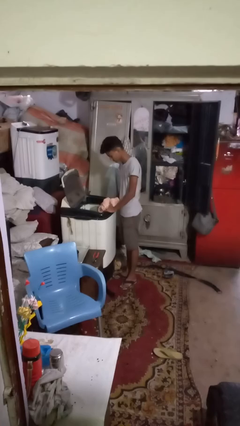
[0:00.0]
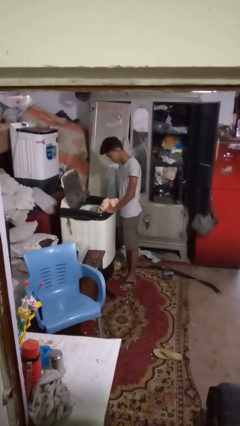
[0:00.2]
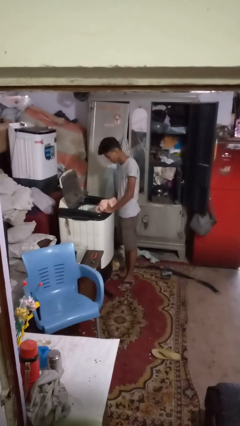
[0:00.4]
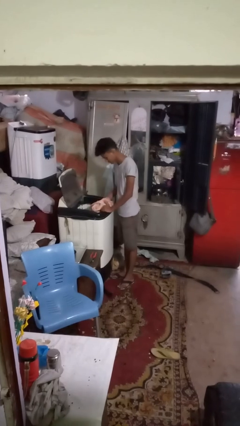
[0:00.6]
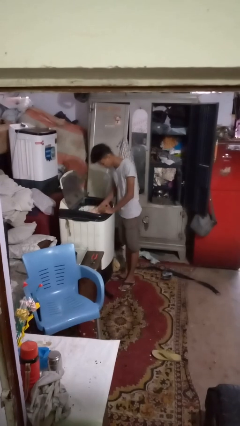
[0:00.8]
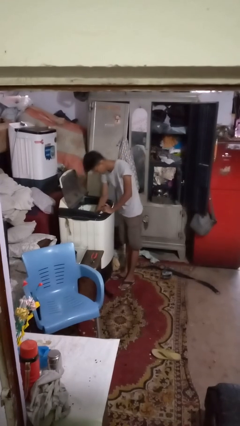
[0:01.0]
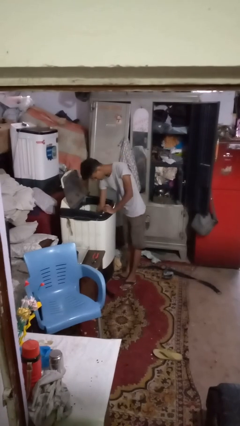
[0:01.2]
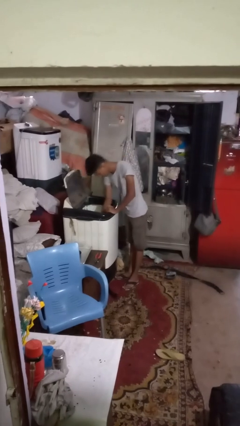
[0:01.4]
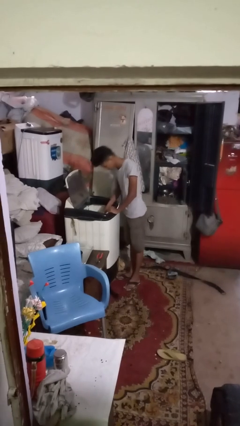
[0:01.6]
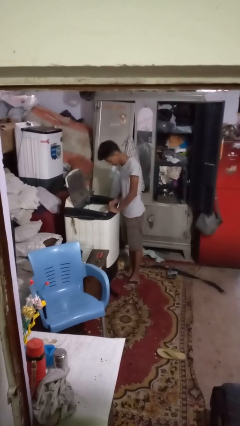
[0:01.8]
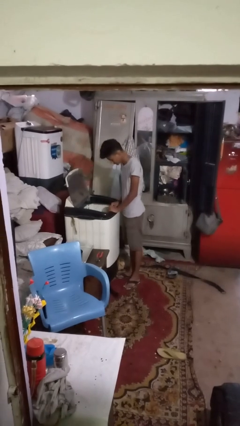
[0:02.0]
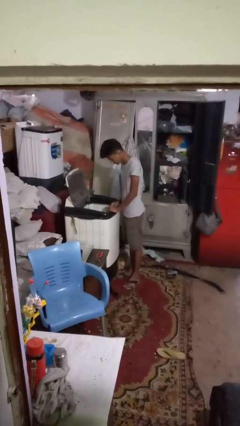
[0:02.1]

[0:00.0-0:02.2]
person loads clotheswasher

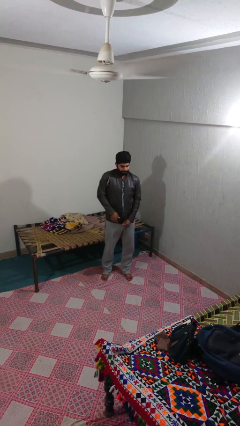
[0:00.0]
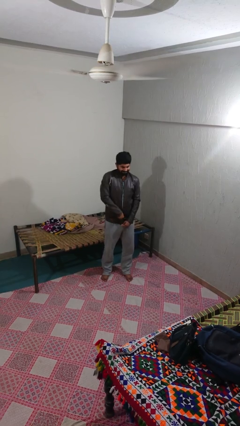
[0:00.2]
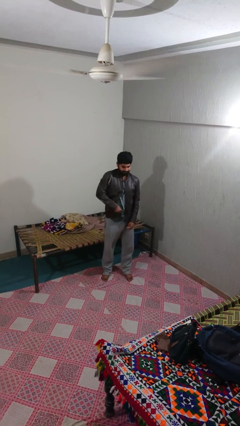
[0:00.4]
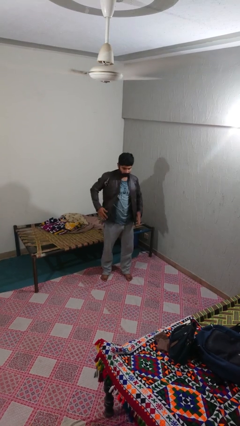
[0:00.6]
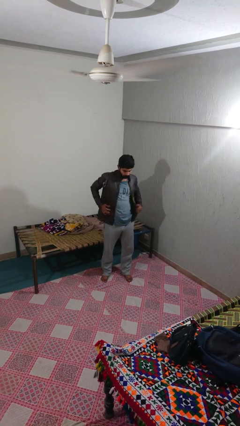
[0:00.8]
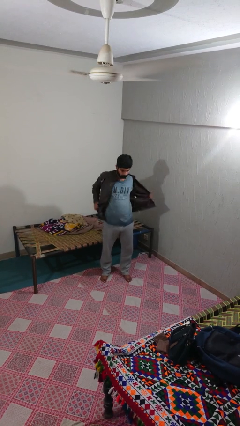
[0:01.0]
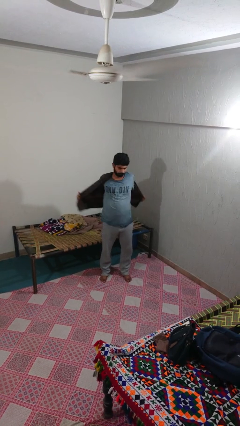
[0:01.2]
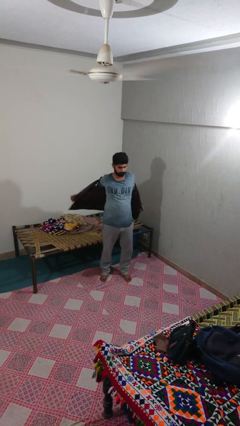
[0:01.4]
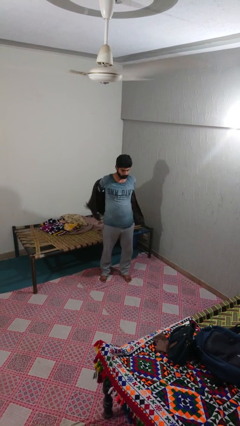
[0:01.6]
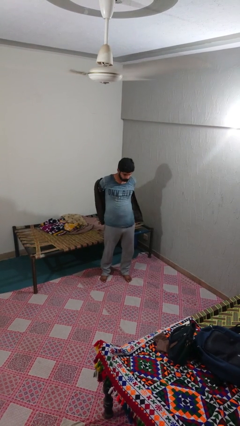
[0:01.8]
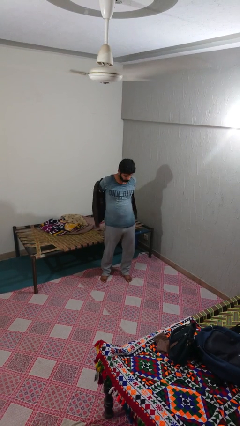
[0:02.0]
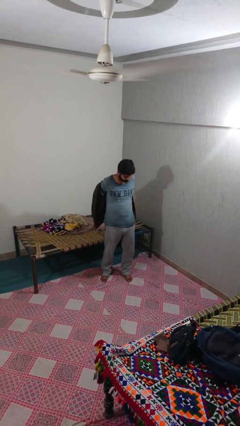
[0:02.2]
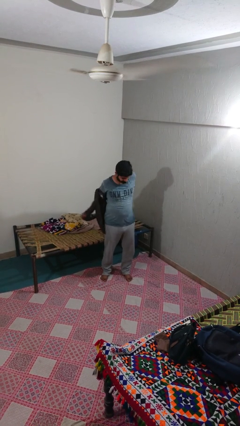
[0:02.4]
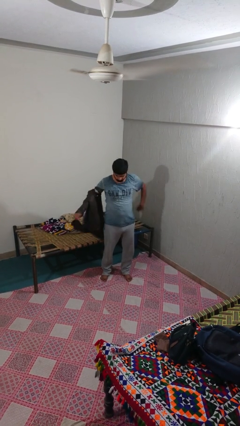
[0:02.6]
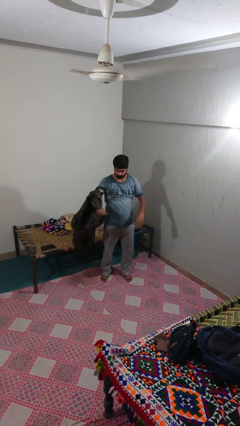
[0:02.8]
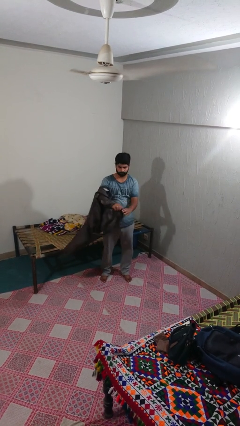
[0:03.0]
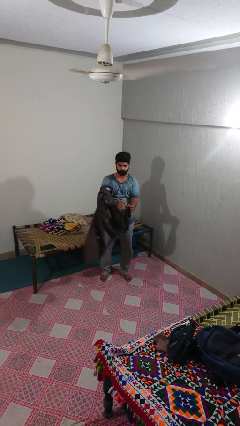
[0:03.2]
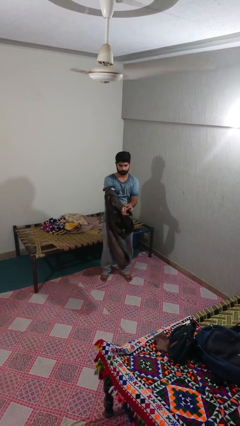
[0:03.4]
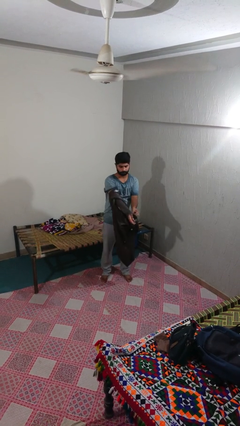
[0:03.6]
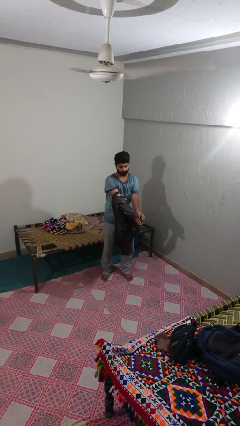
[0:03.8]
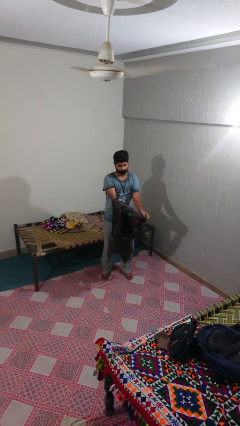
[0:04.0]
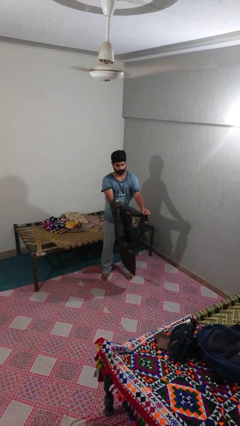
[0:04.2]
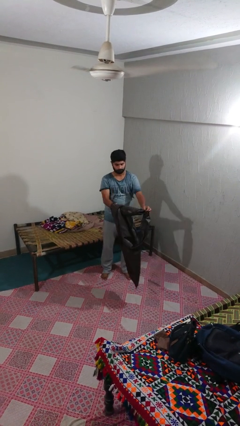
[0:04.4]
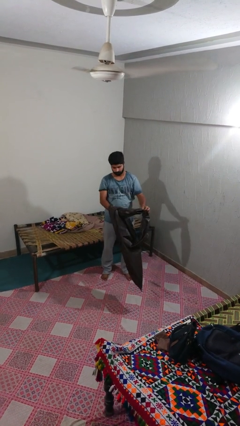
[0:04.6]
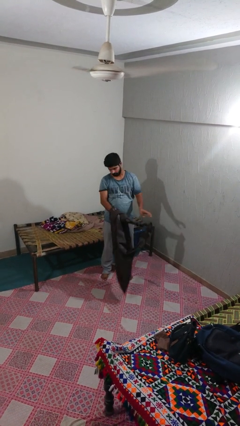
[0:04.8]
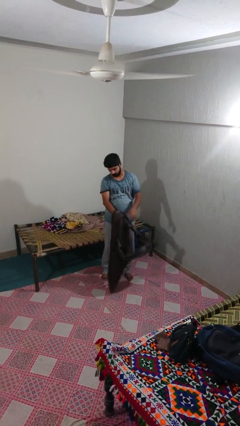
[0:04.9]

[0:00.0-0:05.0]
person takes off jacket

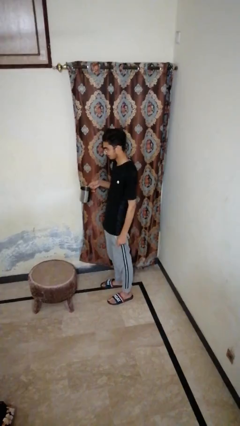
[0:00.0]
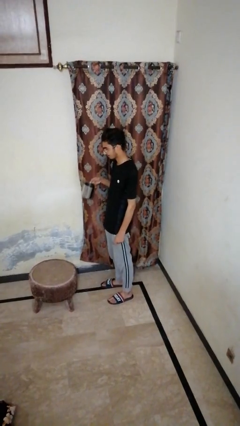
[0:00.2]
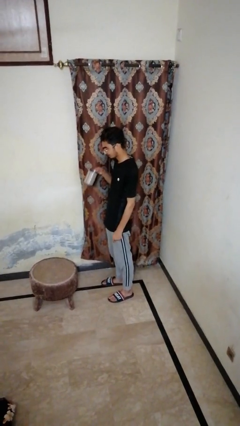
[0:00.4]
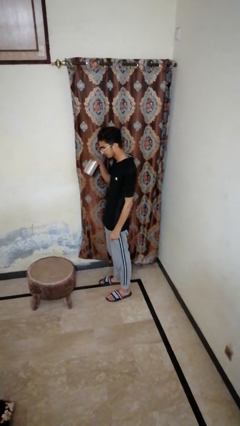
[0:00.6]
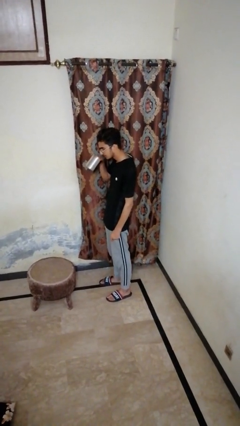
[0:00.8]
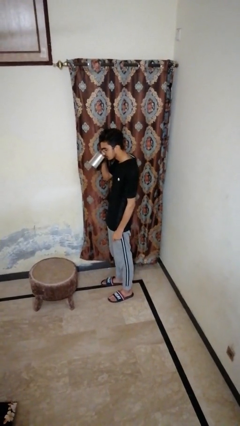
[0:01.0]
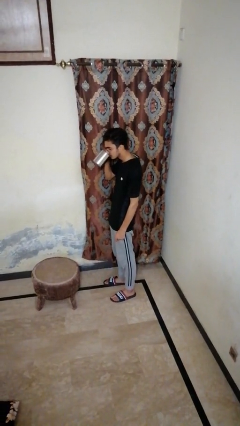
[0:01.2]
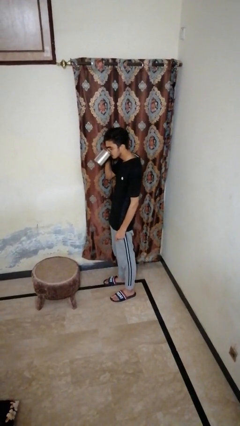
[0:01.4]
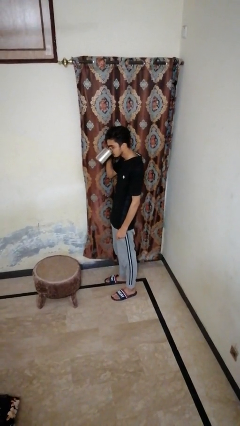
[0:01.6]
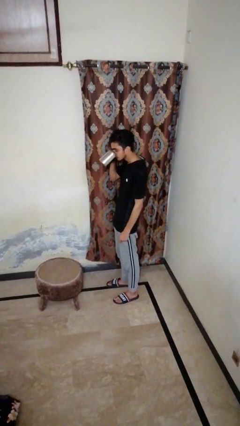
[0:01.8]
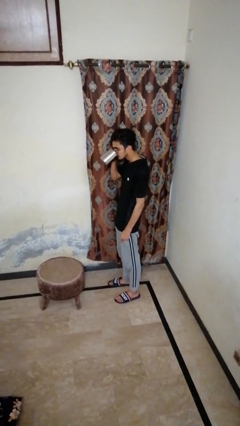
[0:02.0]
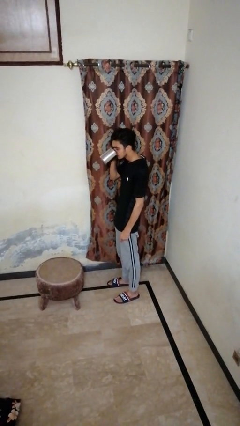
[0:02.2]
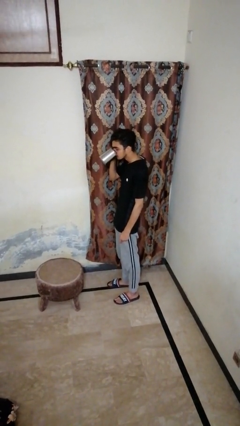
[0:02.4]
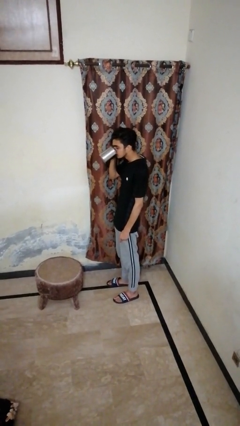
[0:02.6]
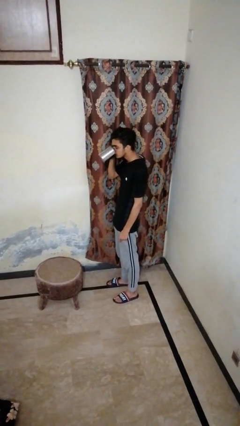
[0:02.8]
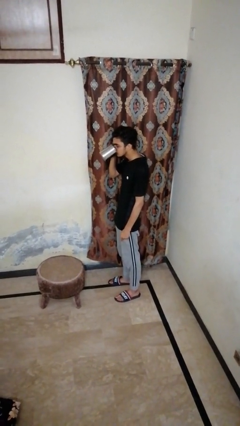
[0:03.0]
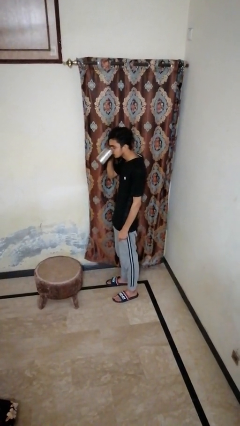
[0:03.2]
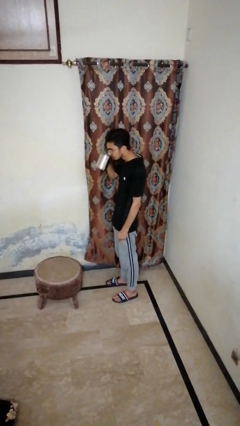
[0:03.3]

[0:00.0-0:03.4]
person drinks from mug

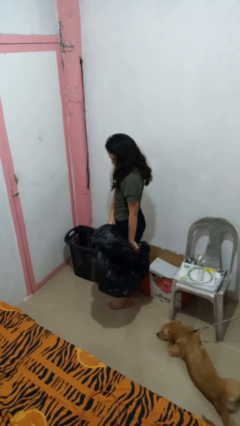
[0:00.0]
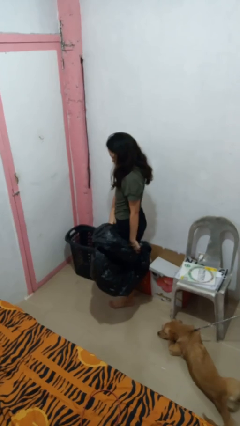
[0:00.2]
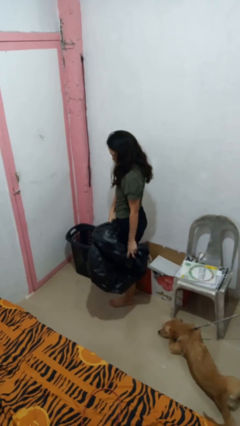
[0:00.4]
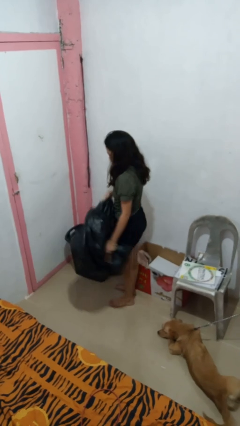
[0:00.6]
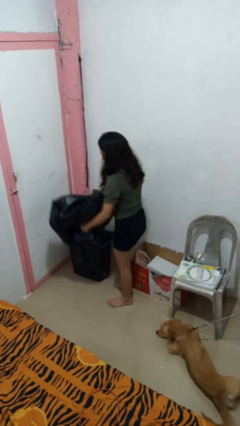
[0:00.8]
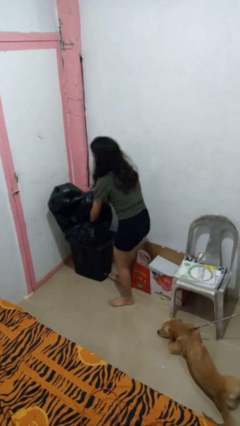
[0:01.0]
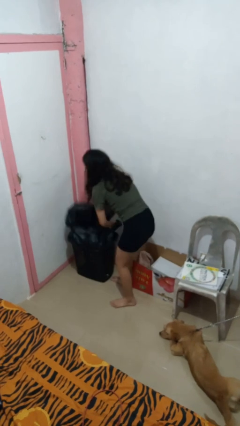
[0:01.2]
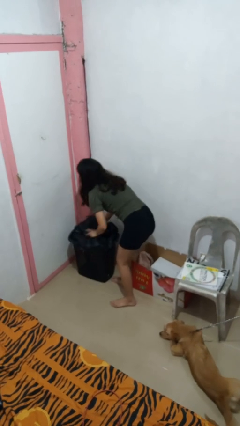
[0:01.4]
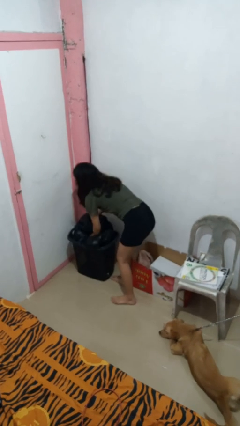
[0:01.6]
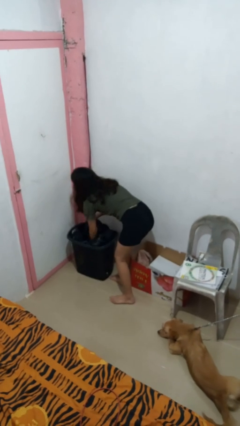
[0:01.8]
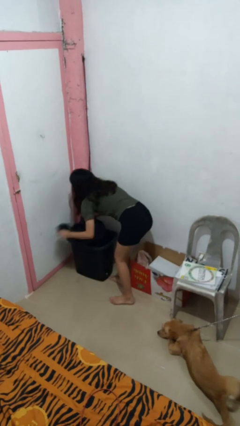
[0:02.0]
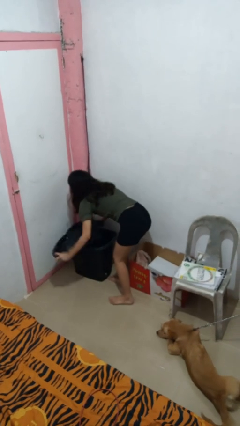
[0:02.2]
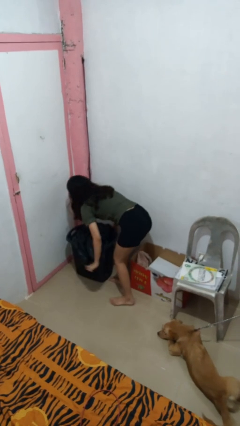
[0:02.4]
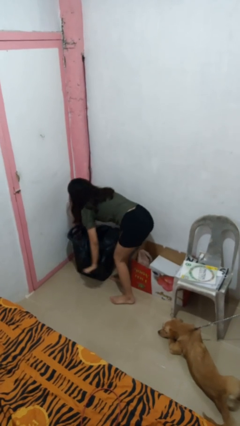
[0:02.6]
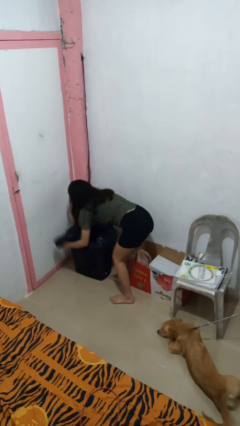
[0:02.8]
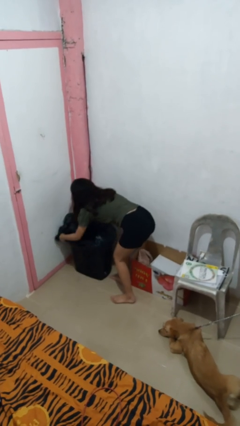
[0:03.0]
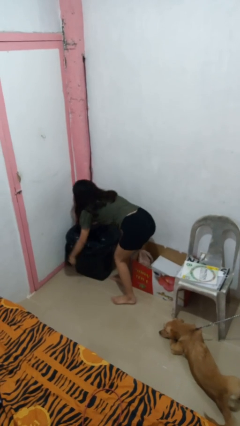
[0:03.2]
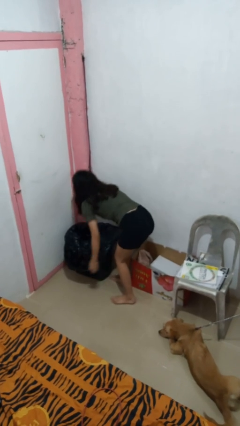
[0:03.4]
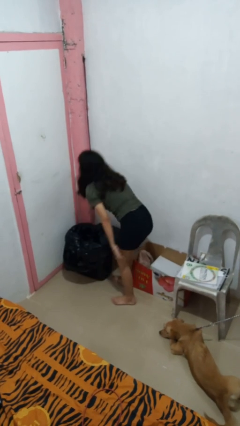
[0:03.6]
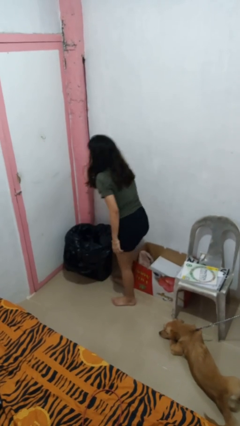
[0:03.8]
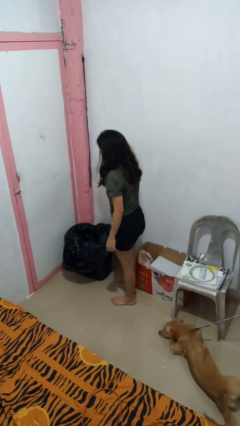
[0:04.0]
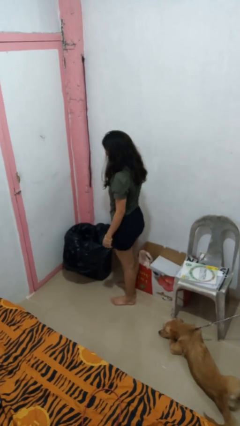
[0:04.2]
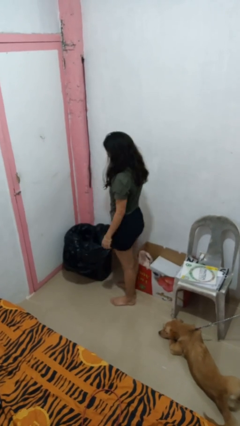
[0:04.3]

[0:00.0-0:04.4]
person inserts trashbag into trashcan

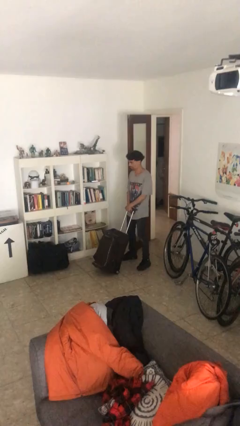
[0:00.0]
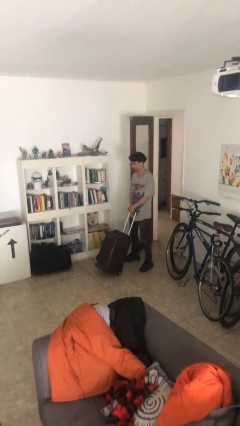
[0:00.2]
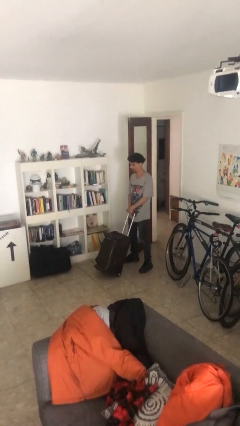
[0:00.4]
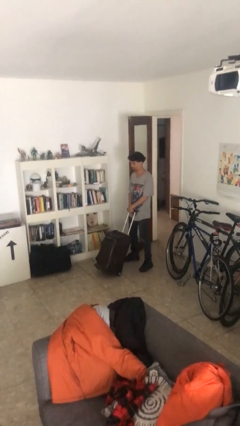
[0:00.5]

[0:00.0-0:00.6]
person pushes wheeled cart

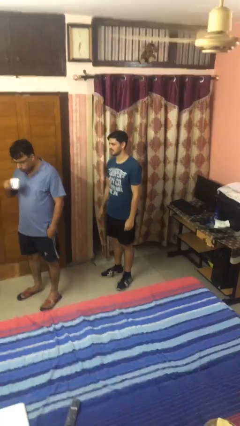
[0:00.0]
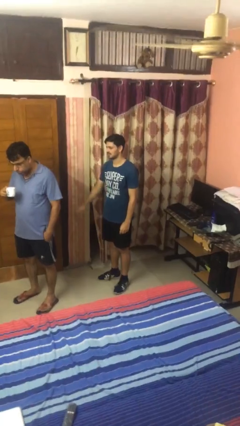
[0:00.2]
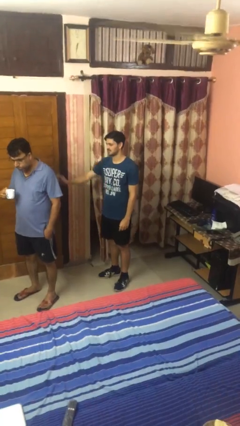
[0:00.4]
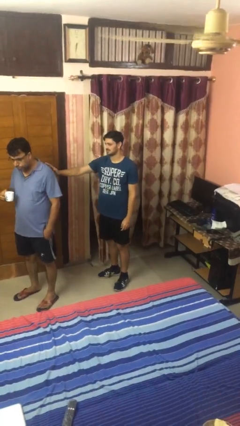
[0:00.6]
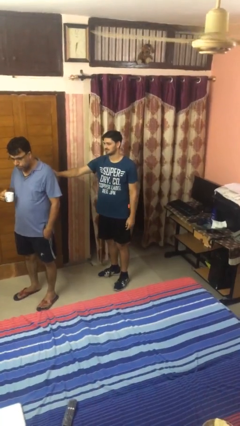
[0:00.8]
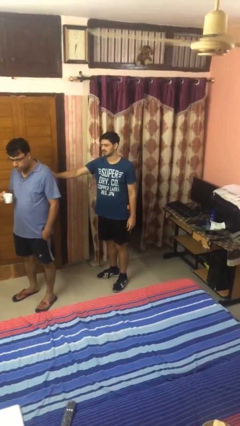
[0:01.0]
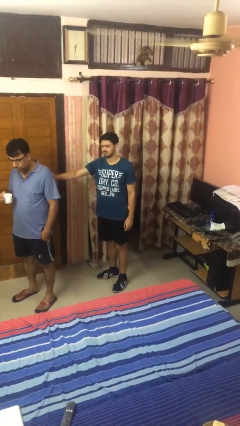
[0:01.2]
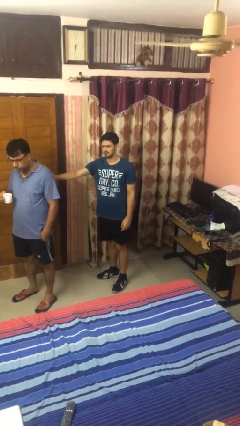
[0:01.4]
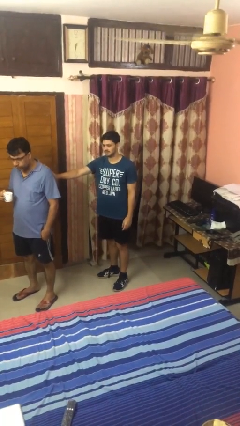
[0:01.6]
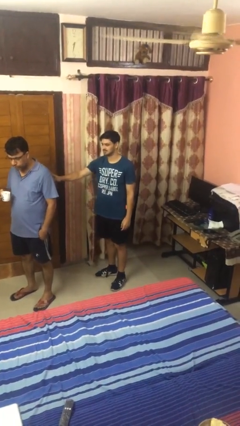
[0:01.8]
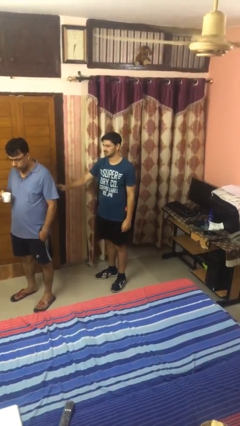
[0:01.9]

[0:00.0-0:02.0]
person touches back of person
